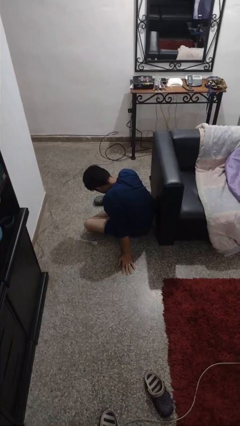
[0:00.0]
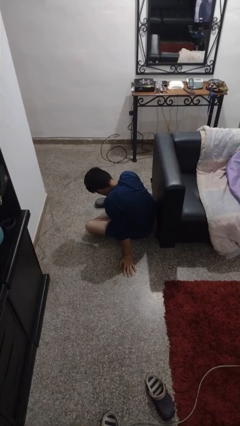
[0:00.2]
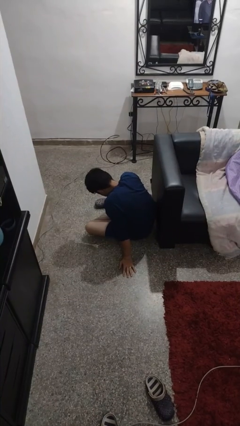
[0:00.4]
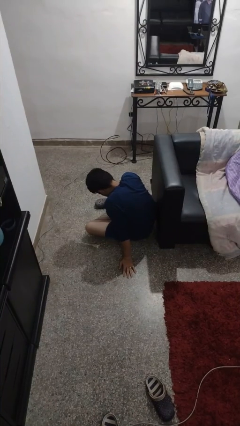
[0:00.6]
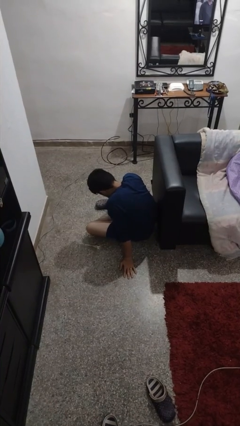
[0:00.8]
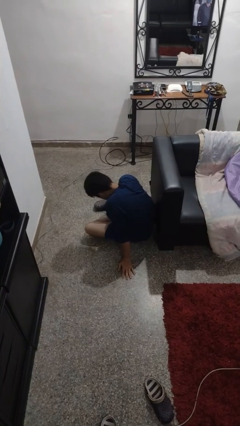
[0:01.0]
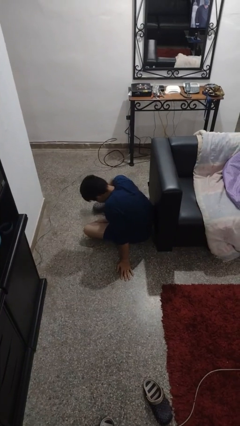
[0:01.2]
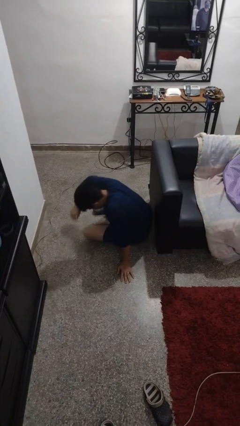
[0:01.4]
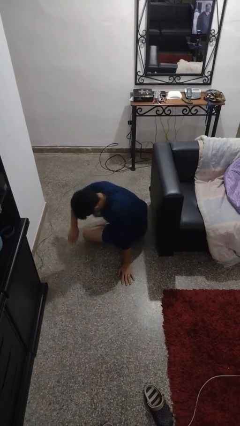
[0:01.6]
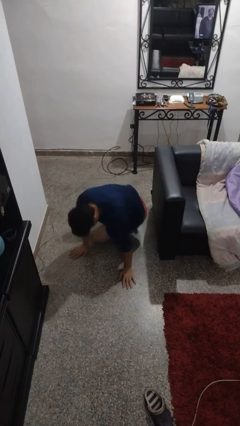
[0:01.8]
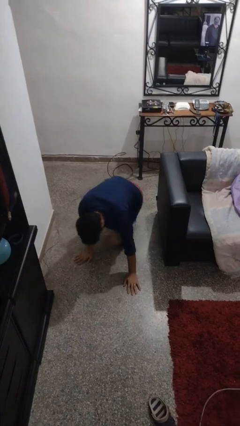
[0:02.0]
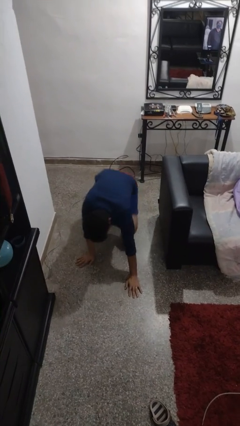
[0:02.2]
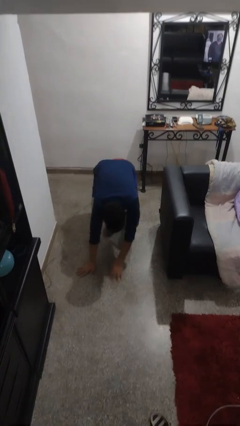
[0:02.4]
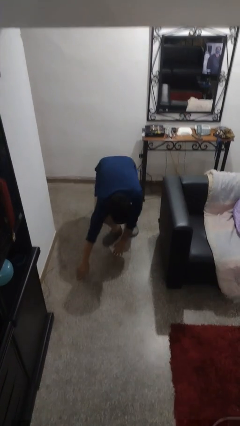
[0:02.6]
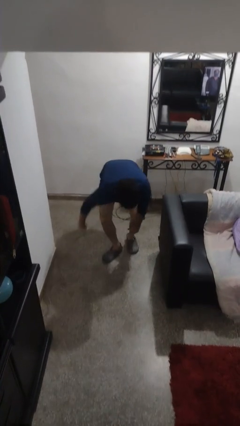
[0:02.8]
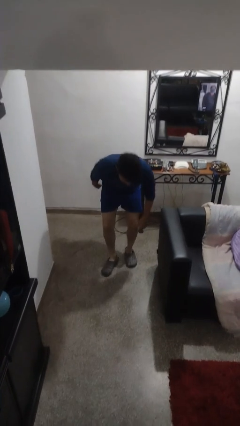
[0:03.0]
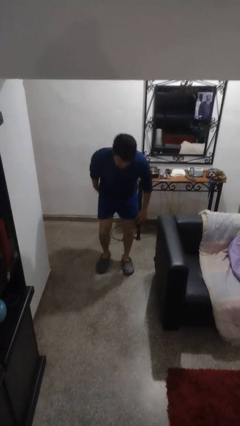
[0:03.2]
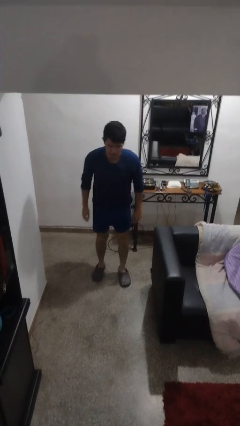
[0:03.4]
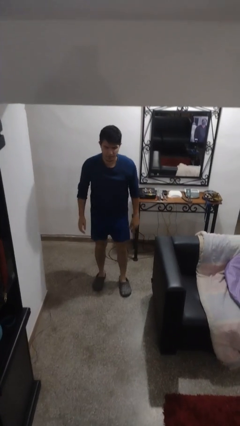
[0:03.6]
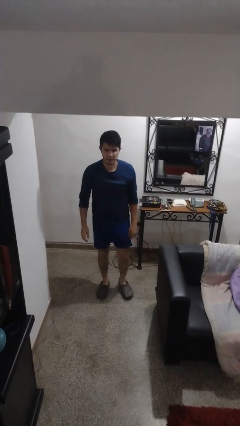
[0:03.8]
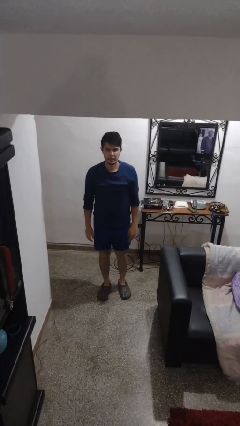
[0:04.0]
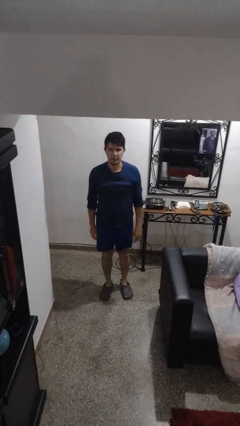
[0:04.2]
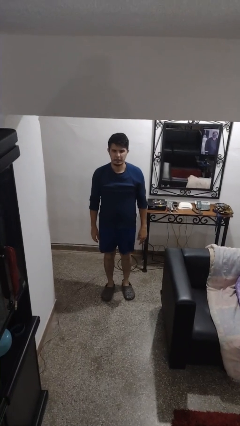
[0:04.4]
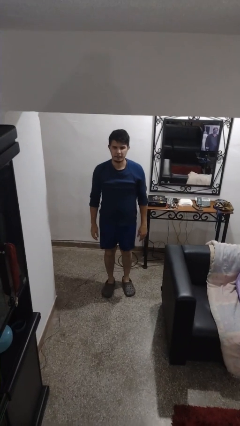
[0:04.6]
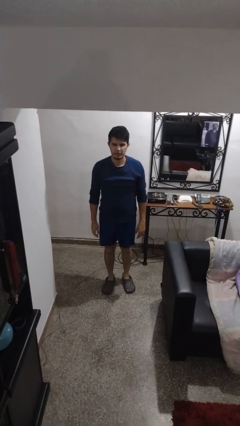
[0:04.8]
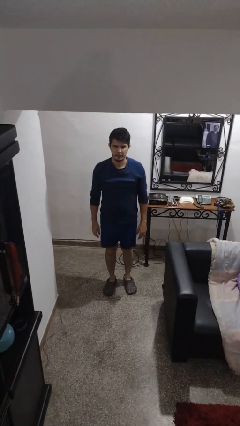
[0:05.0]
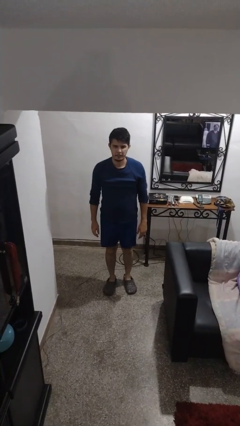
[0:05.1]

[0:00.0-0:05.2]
person stands up from floor

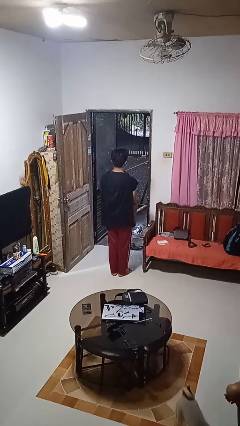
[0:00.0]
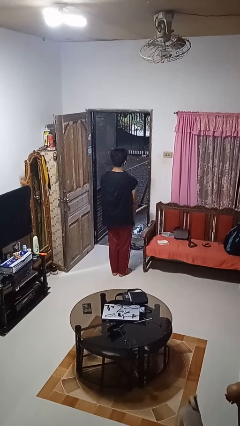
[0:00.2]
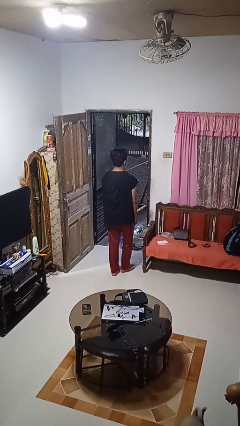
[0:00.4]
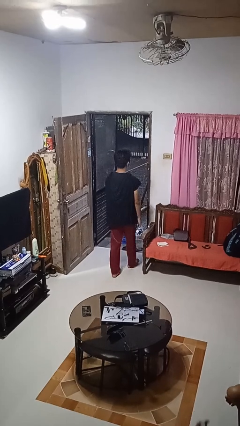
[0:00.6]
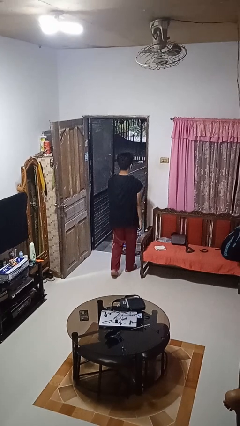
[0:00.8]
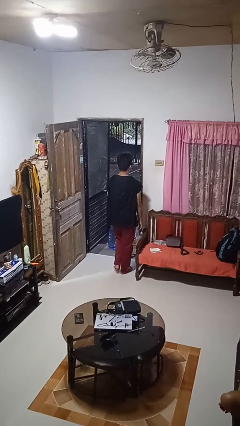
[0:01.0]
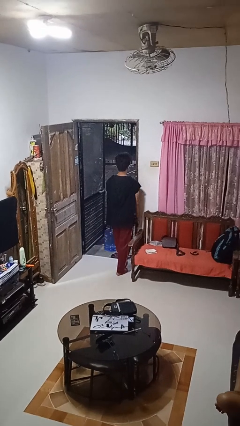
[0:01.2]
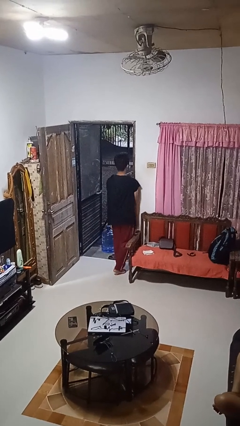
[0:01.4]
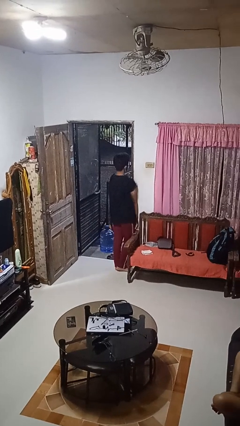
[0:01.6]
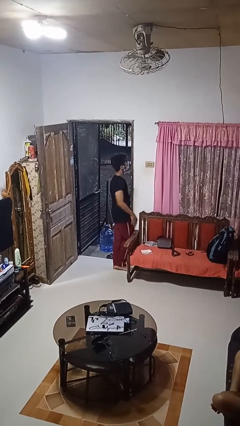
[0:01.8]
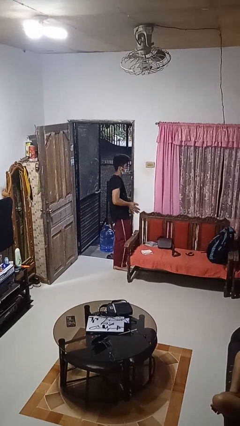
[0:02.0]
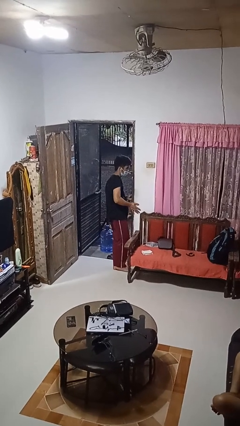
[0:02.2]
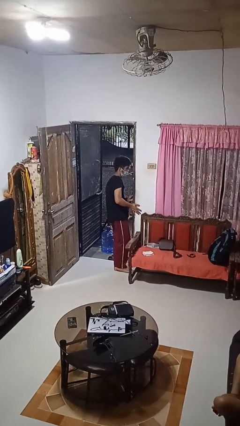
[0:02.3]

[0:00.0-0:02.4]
person bumps into wall

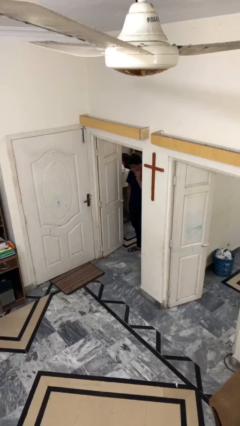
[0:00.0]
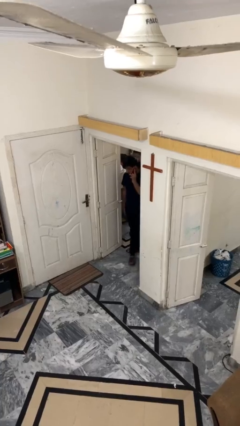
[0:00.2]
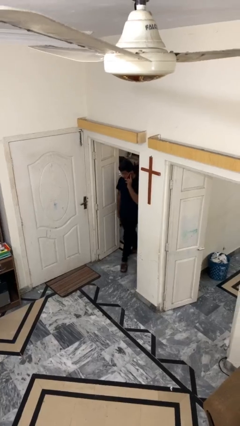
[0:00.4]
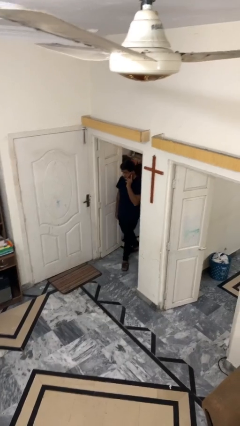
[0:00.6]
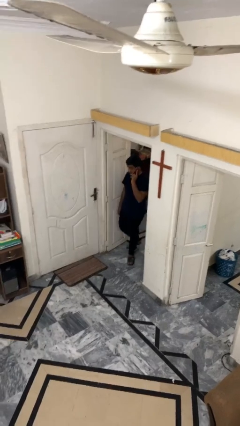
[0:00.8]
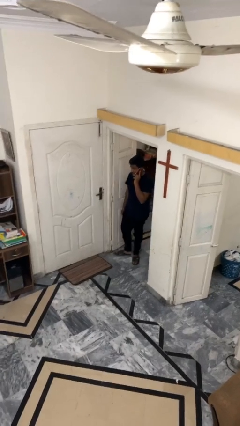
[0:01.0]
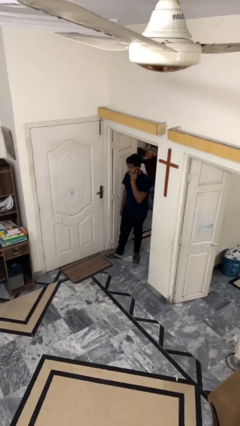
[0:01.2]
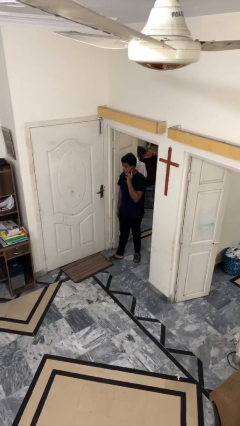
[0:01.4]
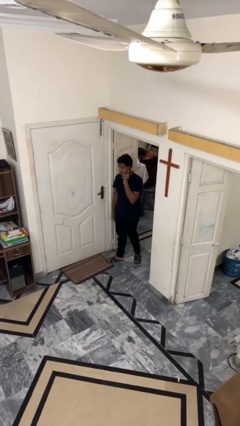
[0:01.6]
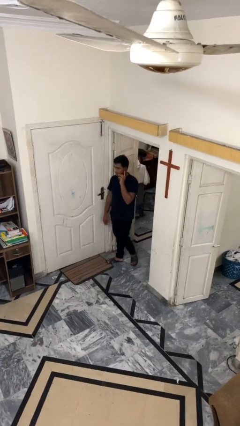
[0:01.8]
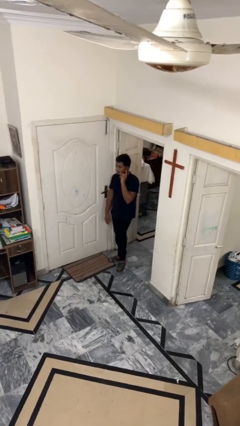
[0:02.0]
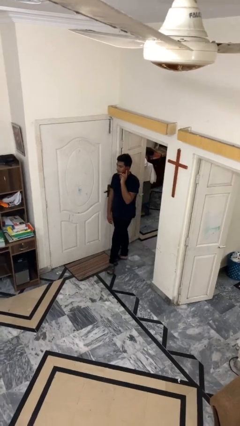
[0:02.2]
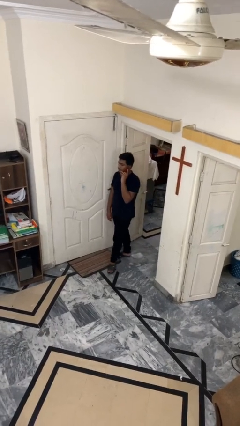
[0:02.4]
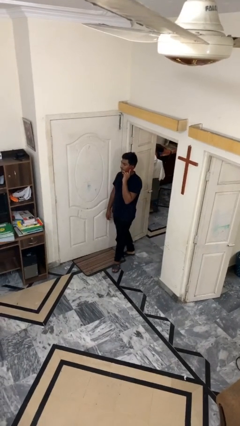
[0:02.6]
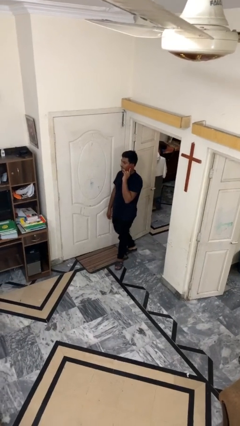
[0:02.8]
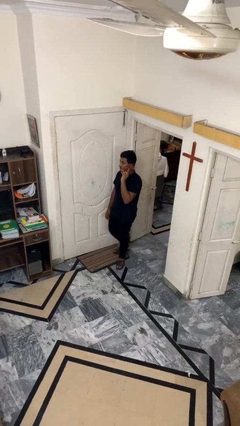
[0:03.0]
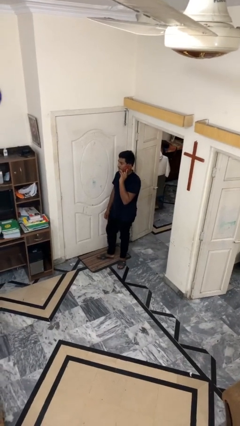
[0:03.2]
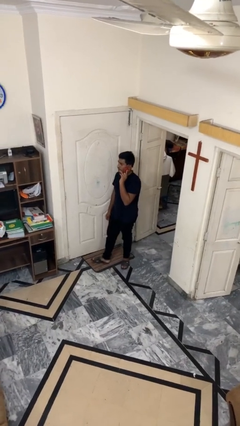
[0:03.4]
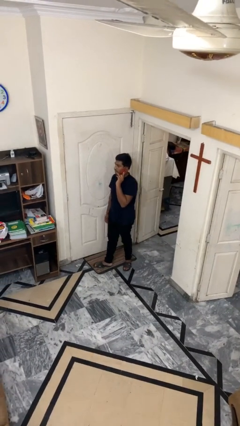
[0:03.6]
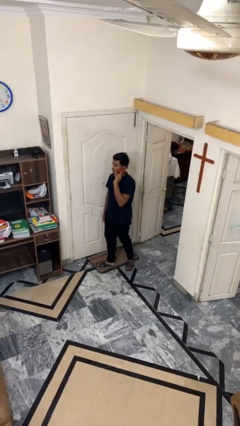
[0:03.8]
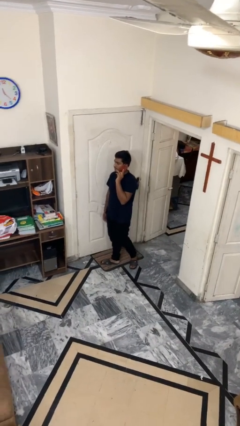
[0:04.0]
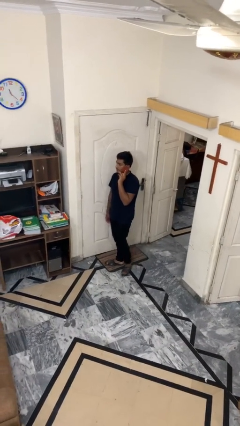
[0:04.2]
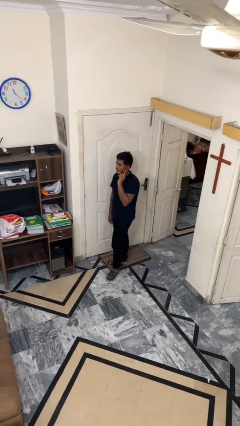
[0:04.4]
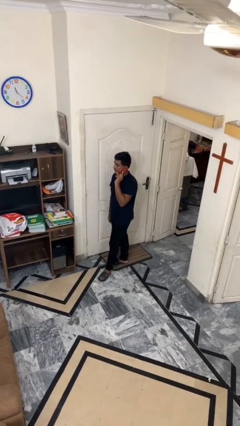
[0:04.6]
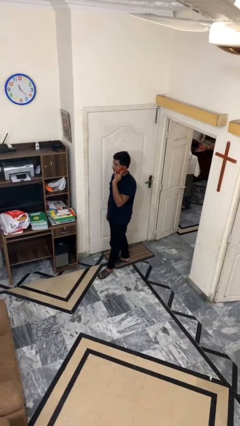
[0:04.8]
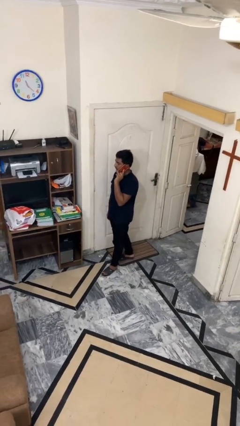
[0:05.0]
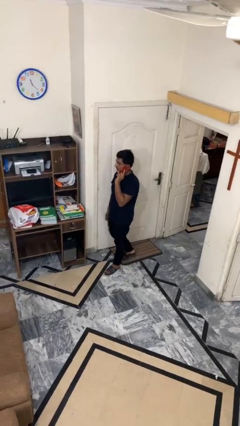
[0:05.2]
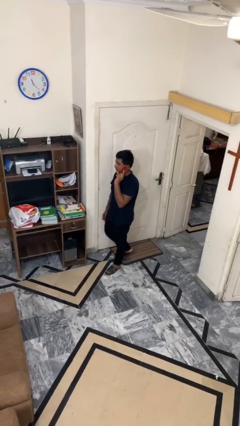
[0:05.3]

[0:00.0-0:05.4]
person enters scene through structure

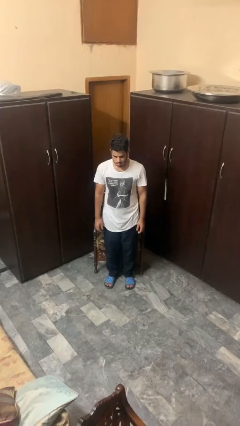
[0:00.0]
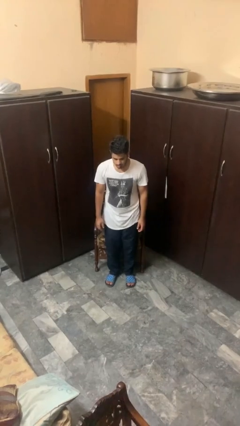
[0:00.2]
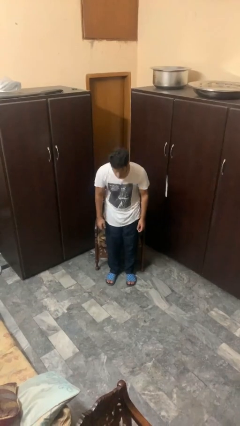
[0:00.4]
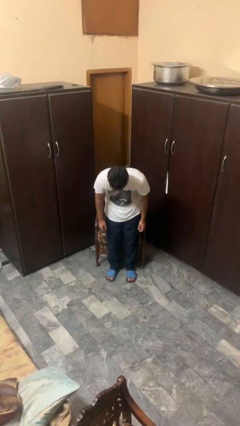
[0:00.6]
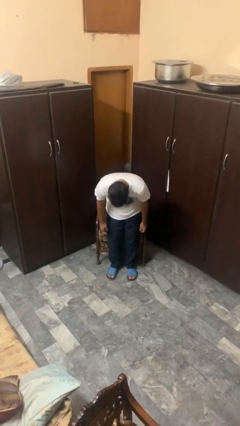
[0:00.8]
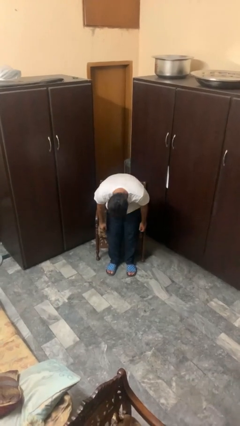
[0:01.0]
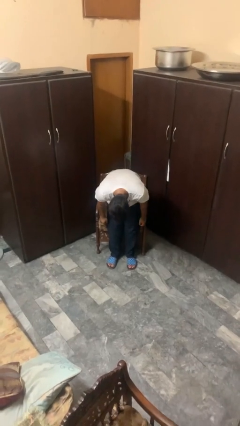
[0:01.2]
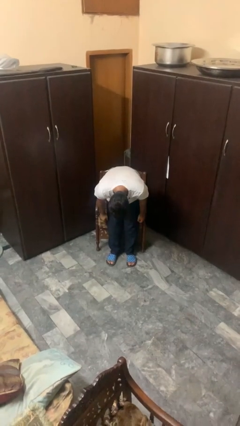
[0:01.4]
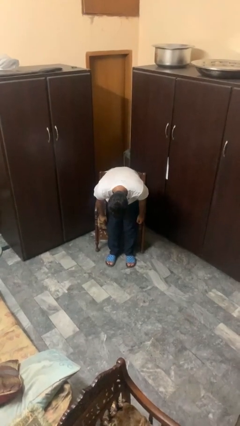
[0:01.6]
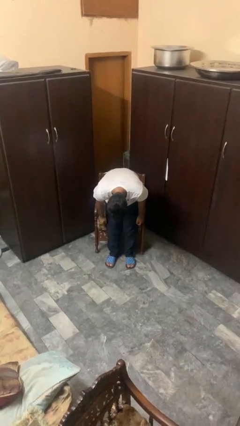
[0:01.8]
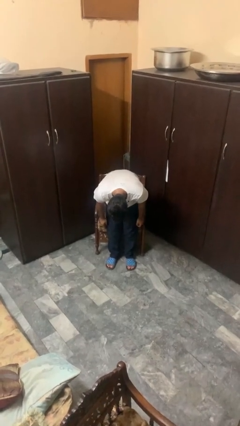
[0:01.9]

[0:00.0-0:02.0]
person bows

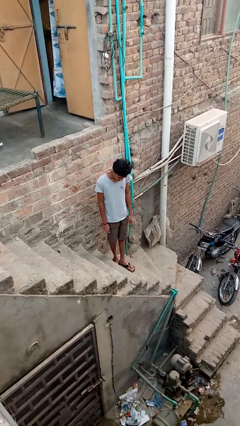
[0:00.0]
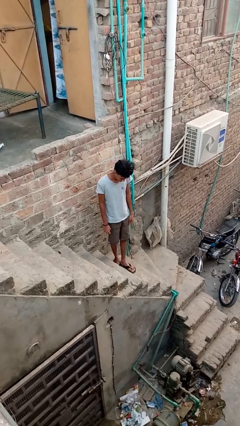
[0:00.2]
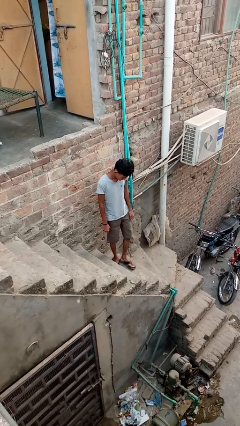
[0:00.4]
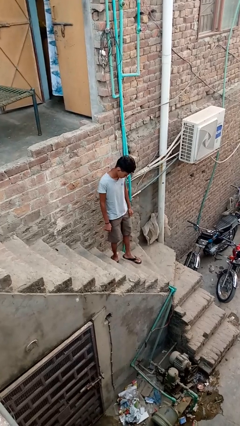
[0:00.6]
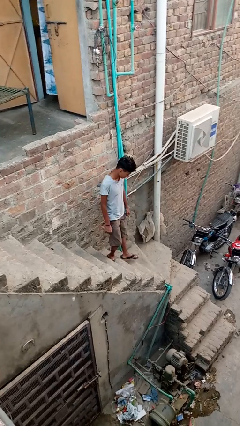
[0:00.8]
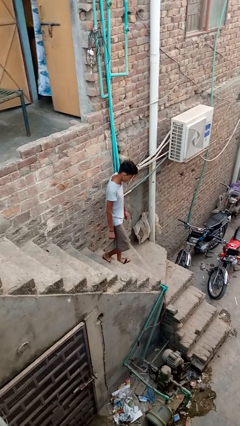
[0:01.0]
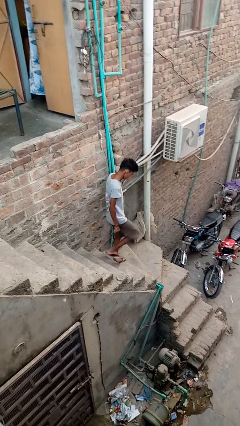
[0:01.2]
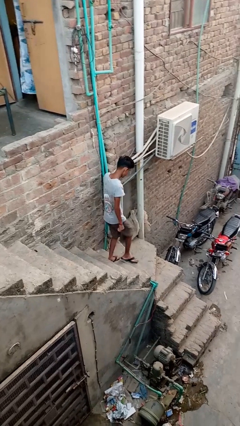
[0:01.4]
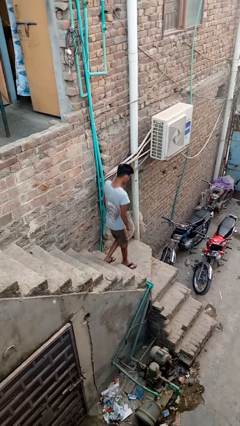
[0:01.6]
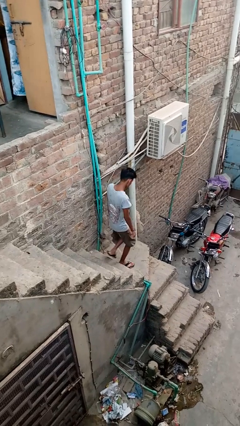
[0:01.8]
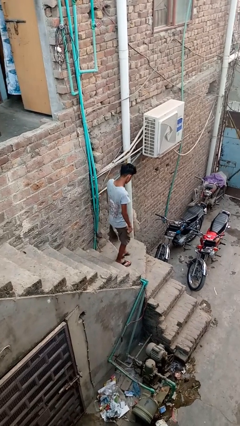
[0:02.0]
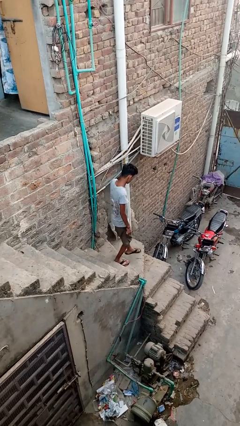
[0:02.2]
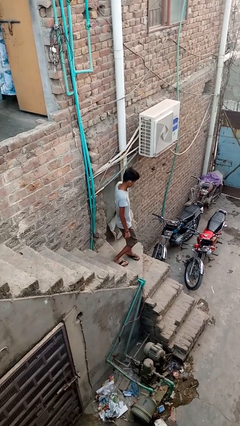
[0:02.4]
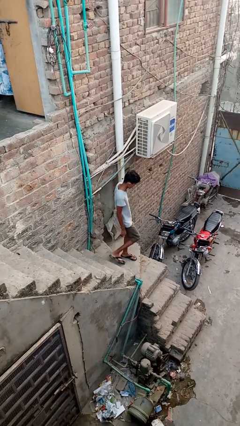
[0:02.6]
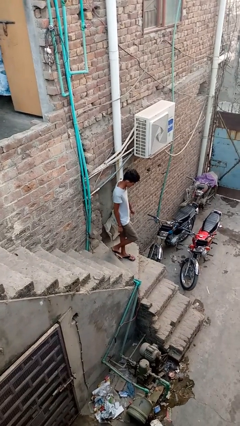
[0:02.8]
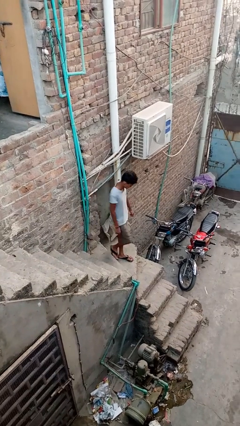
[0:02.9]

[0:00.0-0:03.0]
person climbs down stairs
